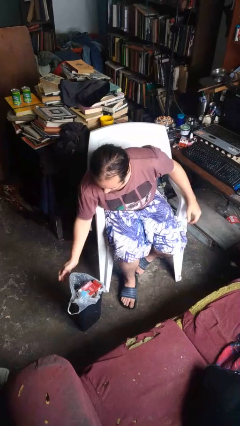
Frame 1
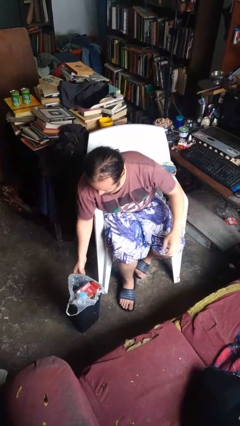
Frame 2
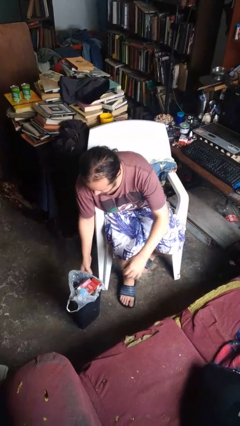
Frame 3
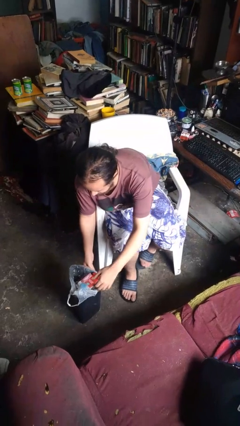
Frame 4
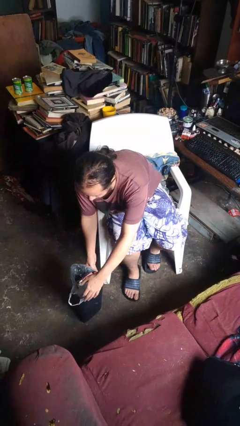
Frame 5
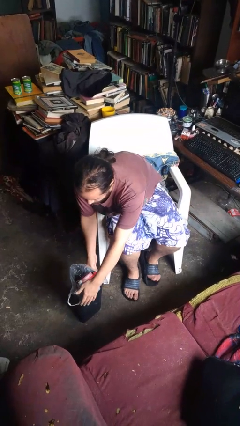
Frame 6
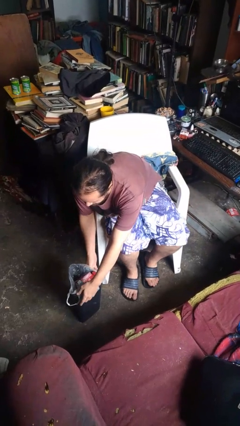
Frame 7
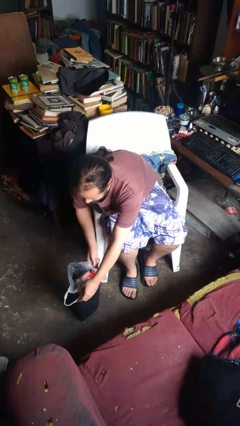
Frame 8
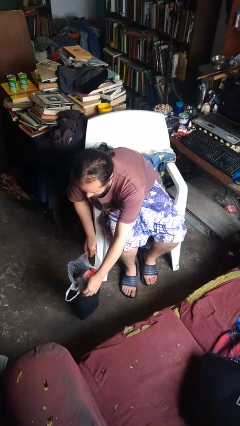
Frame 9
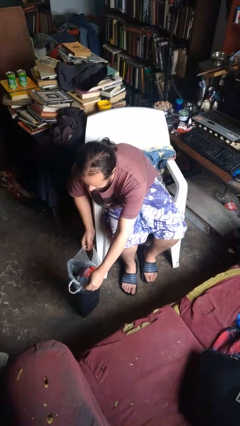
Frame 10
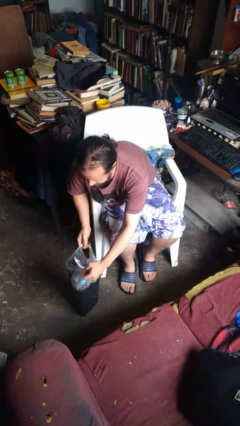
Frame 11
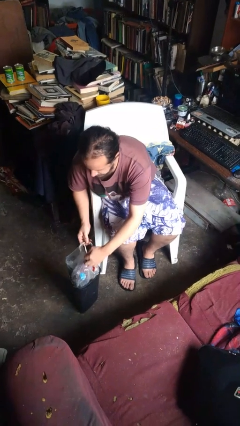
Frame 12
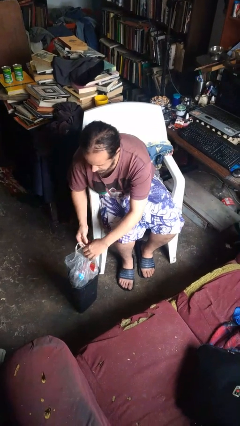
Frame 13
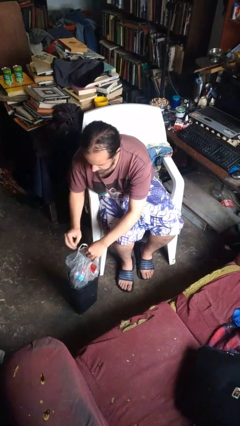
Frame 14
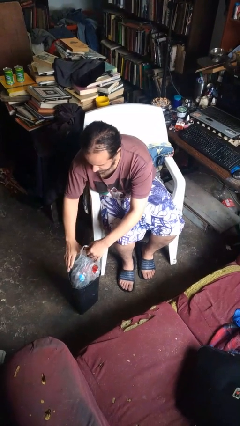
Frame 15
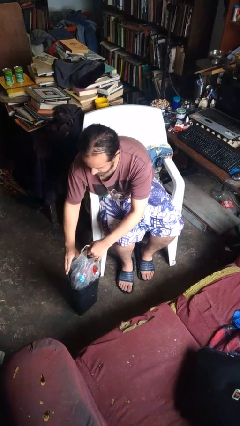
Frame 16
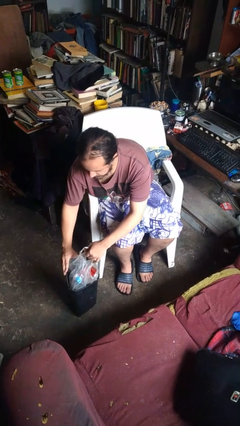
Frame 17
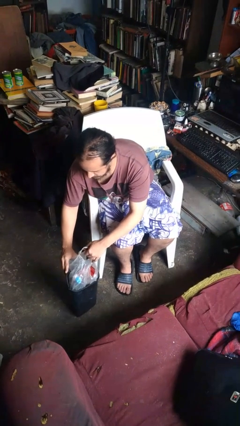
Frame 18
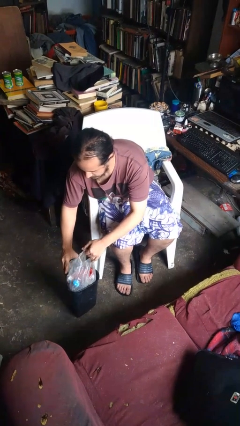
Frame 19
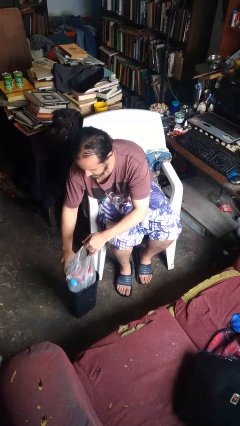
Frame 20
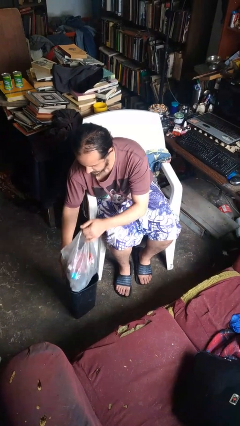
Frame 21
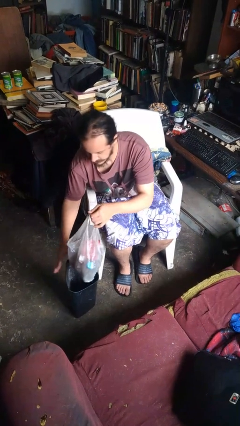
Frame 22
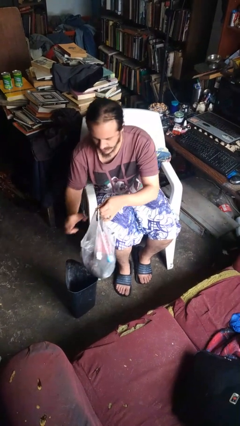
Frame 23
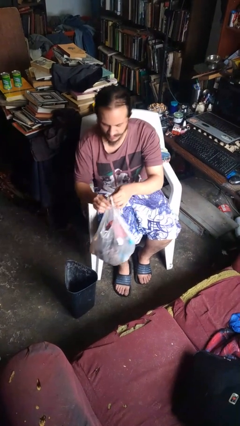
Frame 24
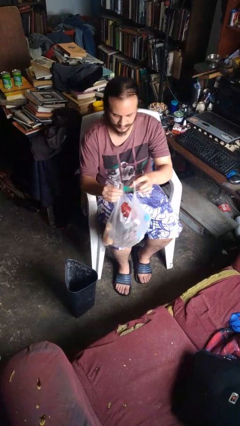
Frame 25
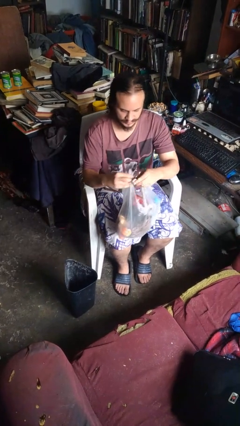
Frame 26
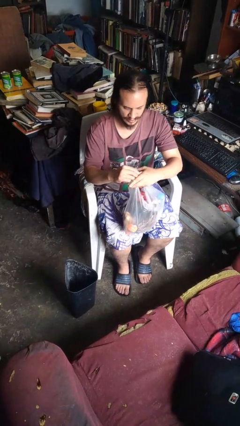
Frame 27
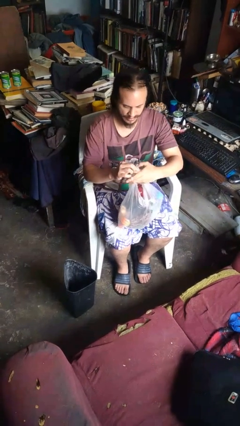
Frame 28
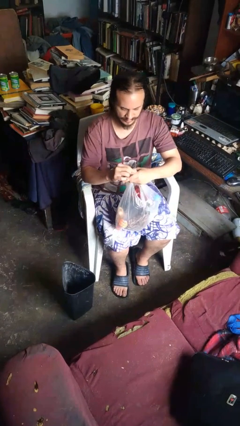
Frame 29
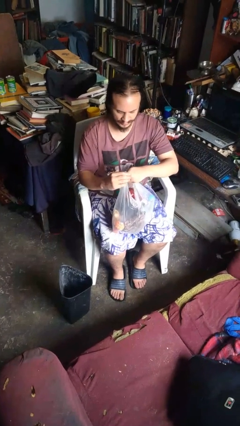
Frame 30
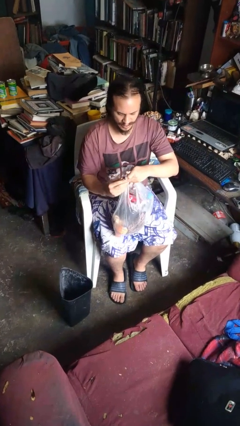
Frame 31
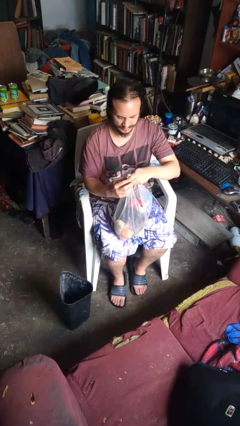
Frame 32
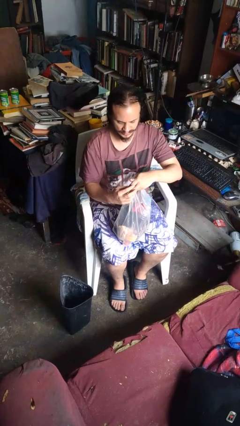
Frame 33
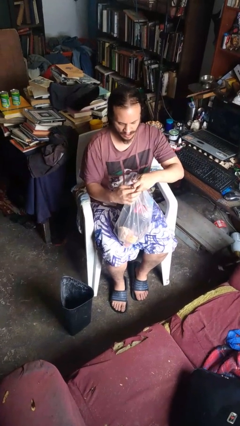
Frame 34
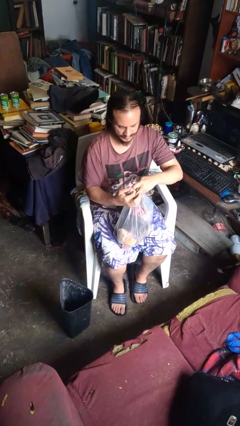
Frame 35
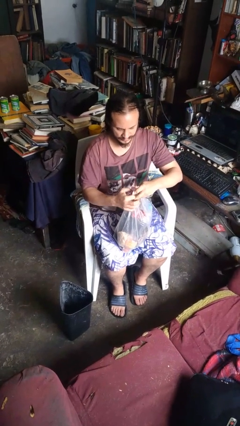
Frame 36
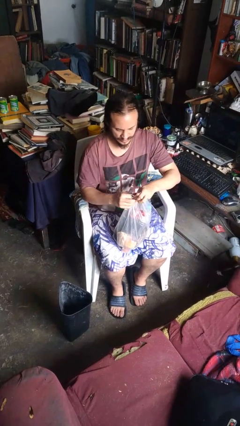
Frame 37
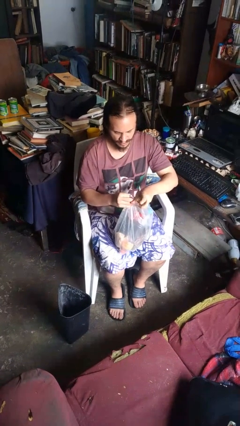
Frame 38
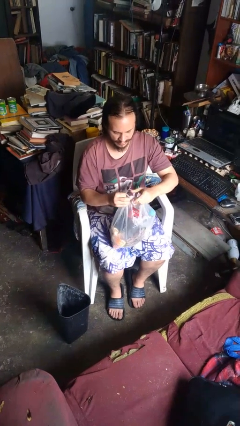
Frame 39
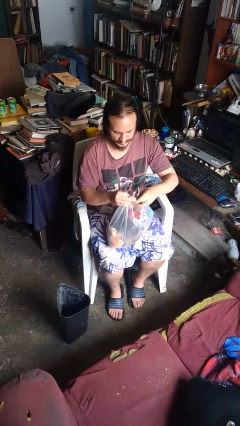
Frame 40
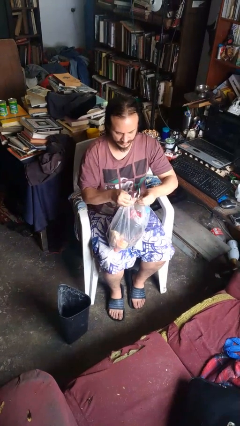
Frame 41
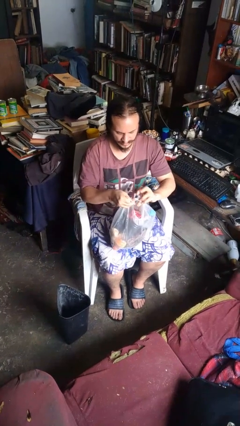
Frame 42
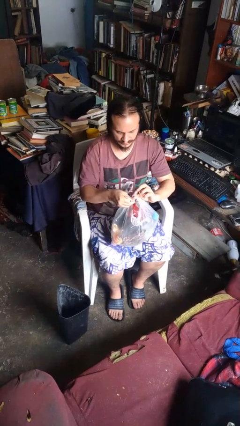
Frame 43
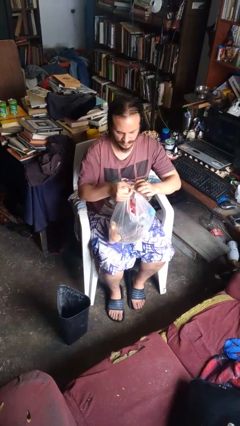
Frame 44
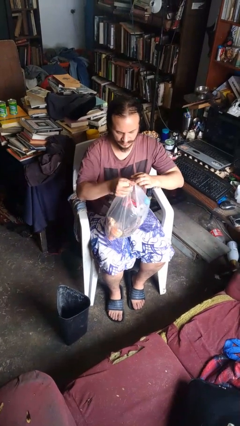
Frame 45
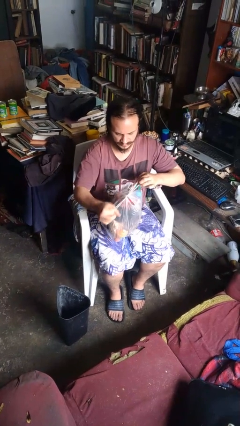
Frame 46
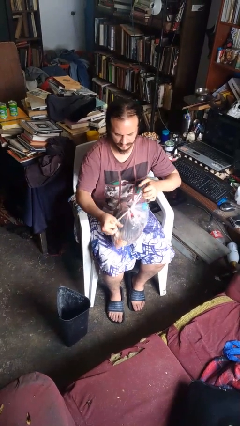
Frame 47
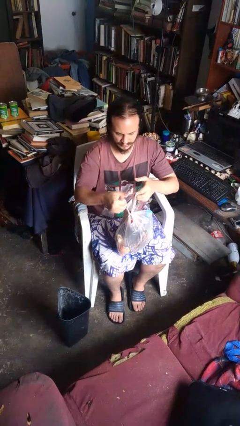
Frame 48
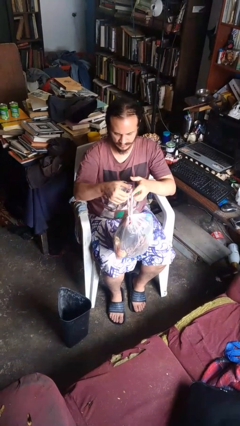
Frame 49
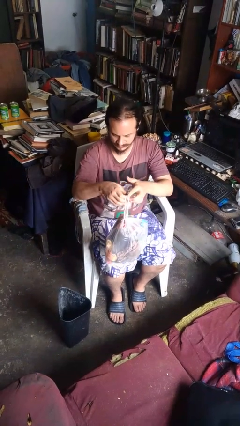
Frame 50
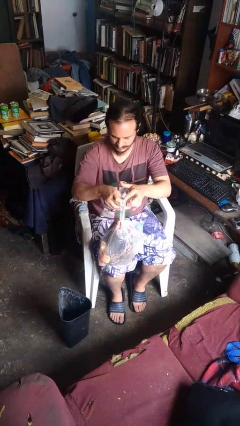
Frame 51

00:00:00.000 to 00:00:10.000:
person removes trashbag from trashcan

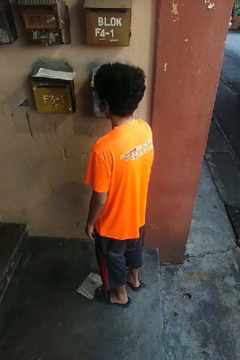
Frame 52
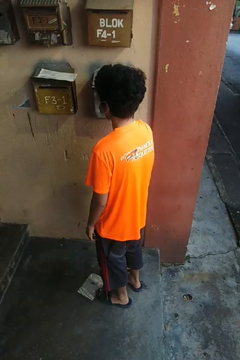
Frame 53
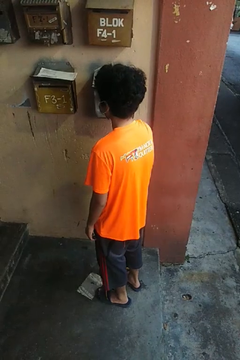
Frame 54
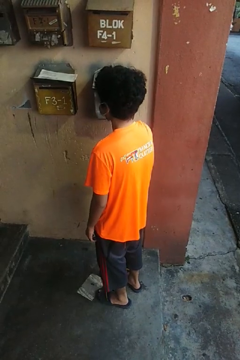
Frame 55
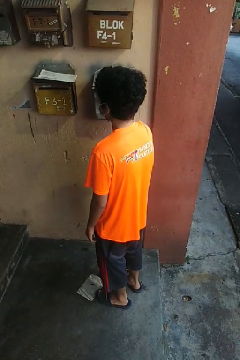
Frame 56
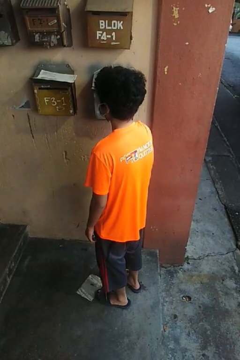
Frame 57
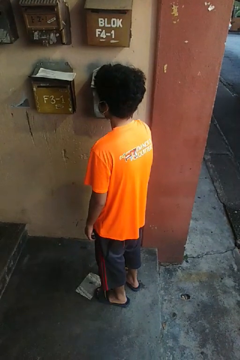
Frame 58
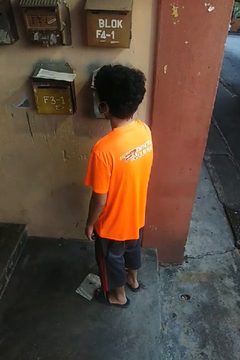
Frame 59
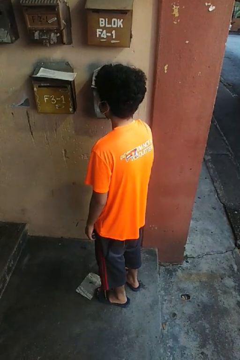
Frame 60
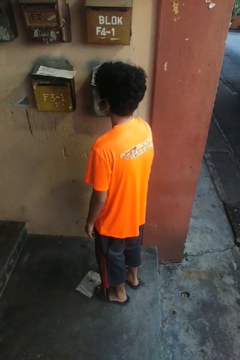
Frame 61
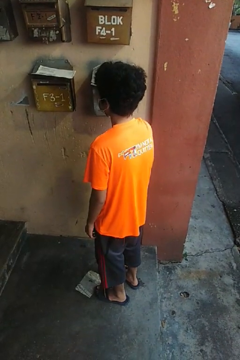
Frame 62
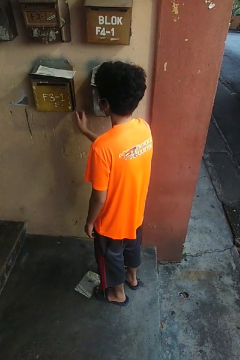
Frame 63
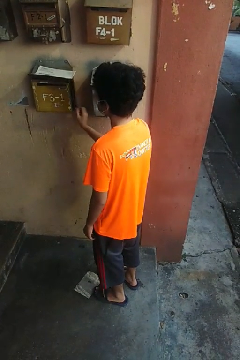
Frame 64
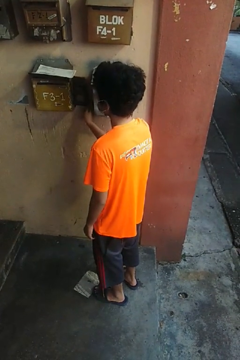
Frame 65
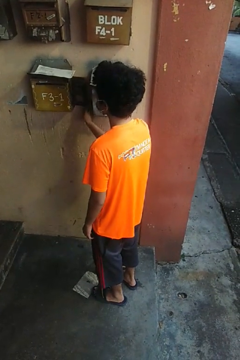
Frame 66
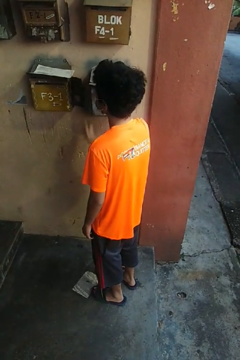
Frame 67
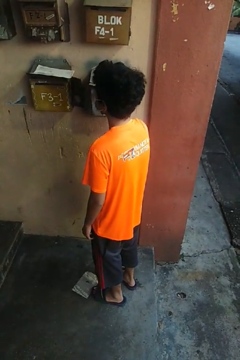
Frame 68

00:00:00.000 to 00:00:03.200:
person opens mailbox

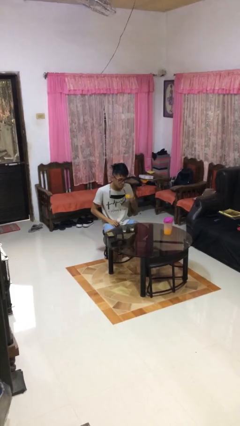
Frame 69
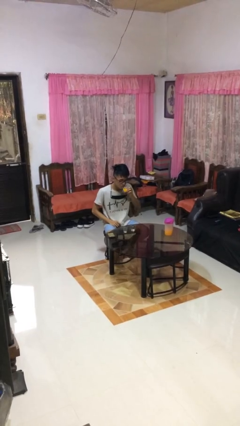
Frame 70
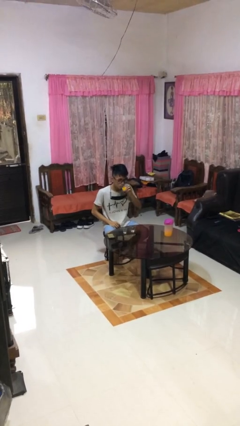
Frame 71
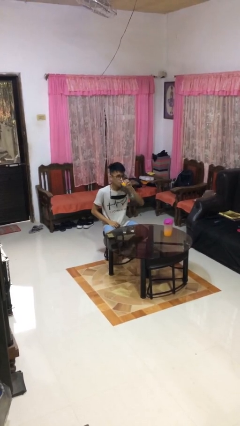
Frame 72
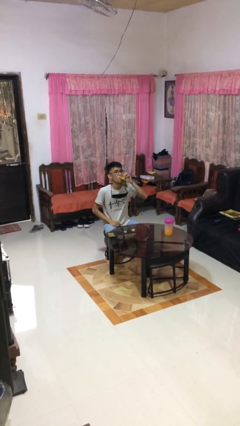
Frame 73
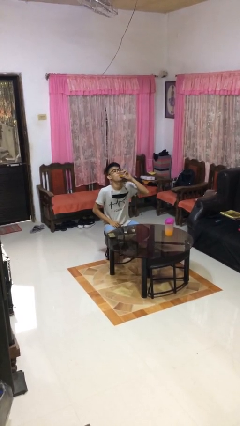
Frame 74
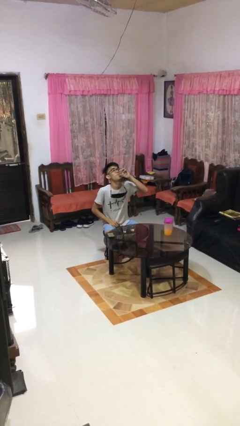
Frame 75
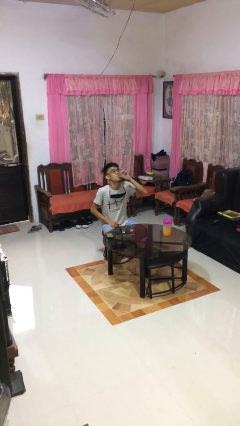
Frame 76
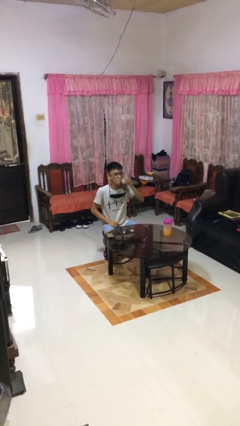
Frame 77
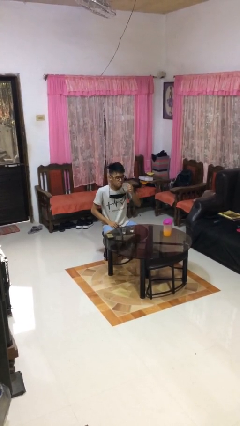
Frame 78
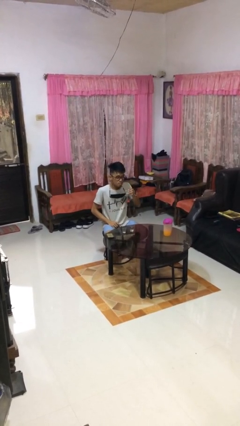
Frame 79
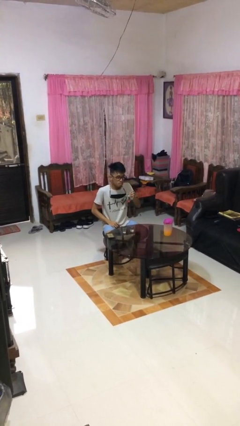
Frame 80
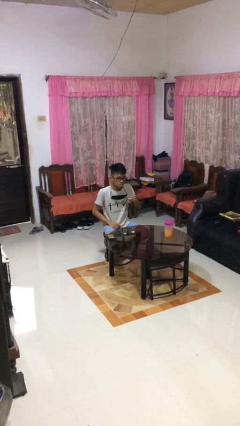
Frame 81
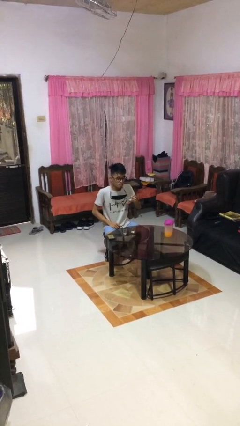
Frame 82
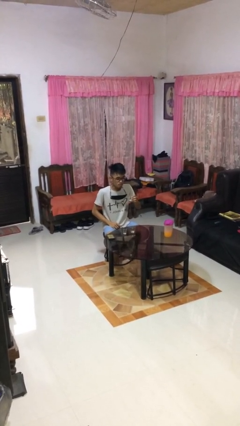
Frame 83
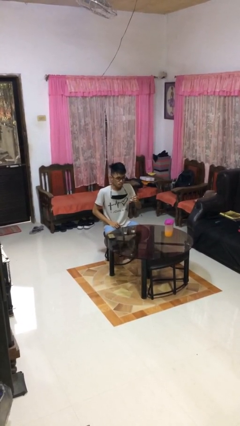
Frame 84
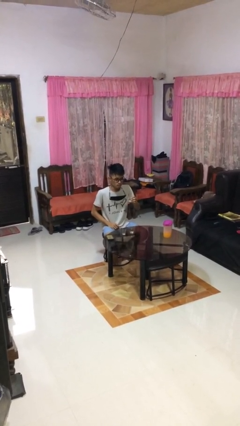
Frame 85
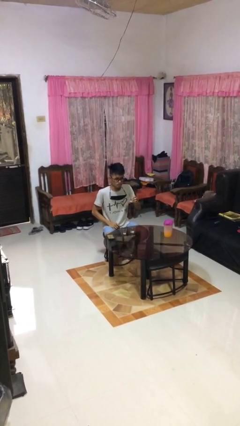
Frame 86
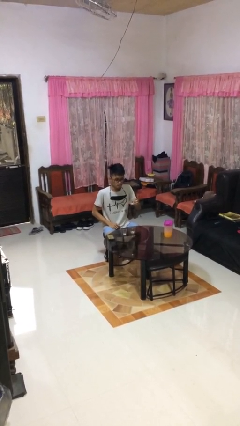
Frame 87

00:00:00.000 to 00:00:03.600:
person drinks from shotglass

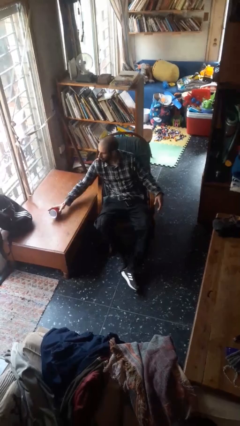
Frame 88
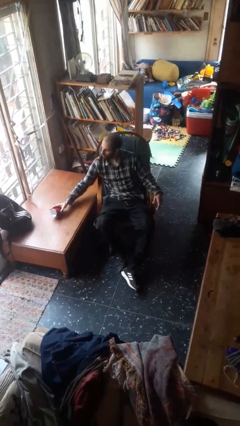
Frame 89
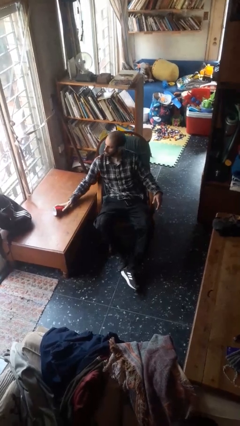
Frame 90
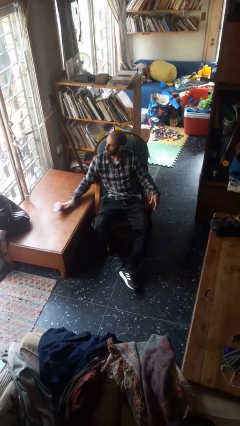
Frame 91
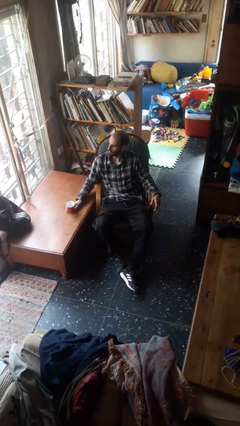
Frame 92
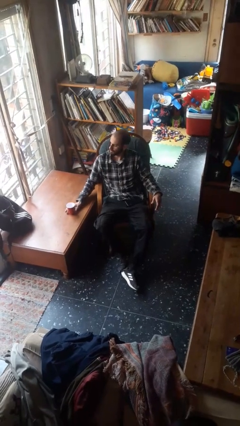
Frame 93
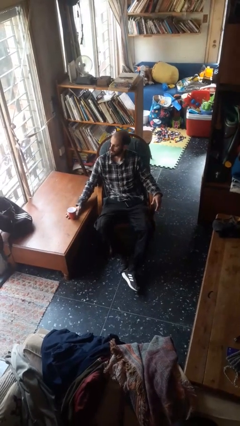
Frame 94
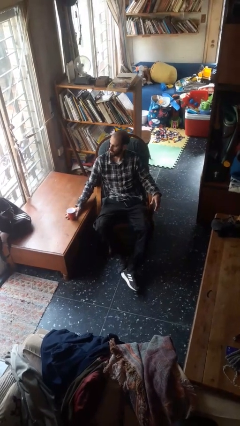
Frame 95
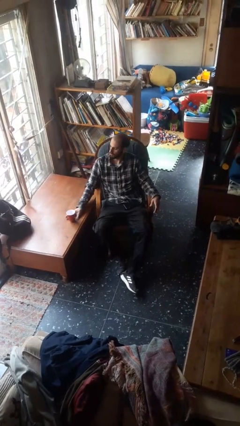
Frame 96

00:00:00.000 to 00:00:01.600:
person sets upright glass

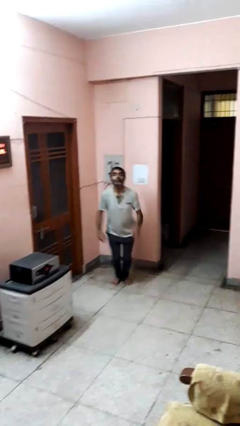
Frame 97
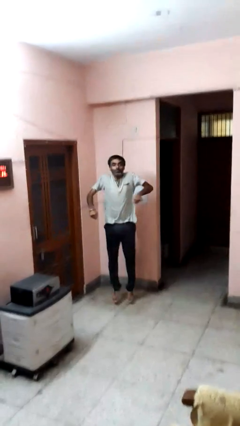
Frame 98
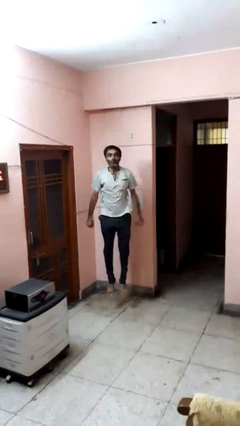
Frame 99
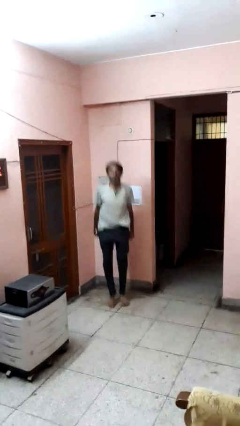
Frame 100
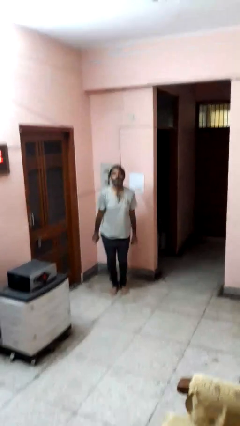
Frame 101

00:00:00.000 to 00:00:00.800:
person jumps
